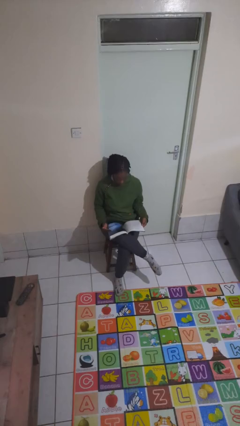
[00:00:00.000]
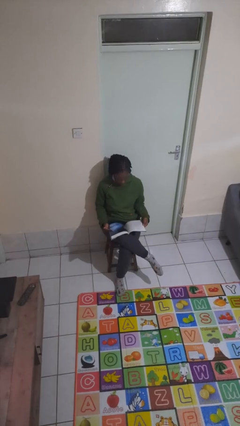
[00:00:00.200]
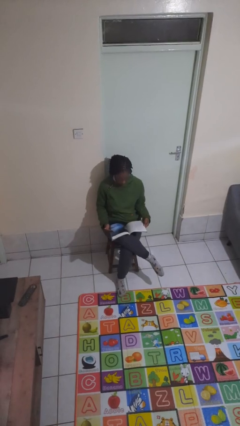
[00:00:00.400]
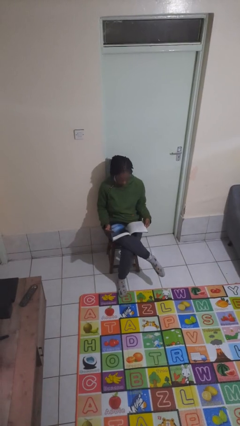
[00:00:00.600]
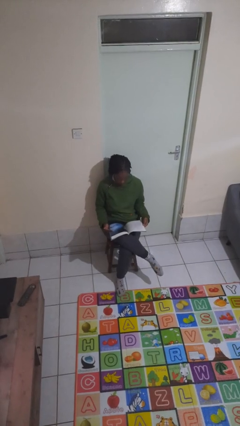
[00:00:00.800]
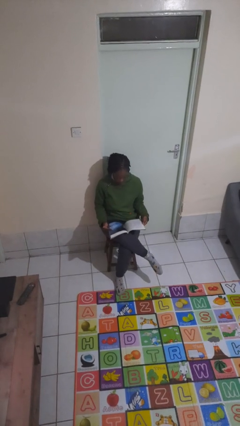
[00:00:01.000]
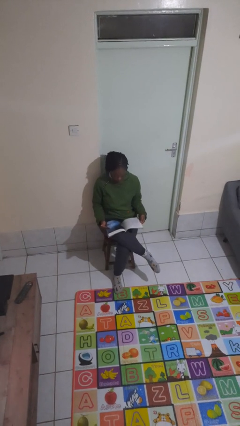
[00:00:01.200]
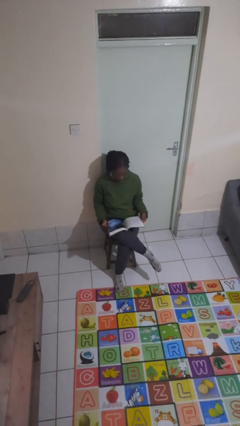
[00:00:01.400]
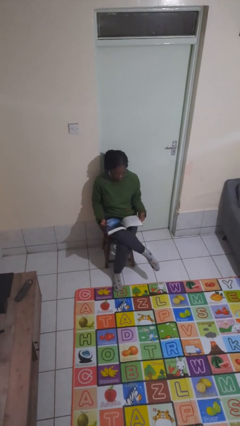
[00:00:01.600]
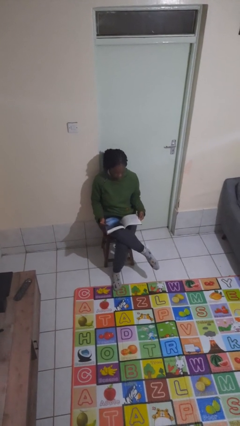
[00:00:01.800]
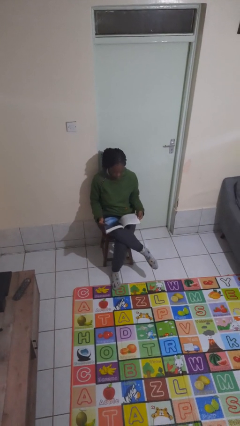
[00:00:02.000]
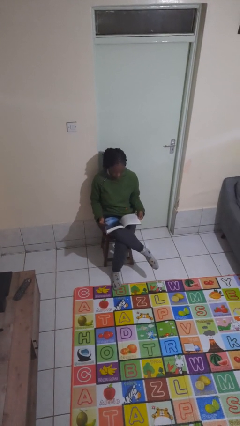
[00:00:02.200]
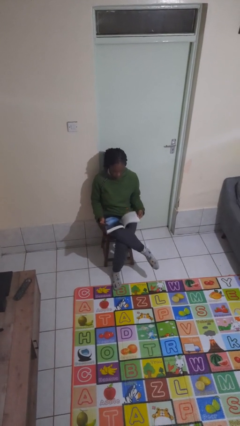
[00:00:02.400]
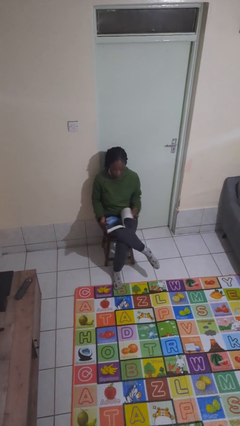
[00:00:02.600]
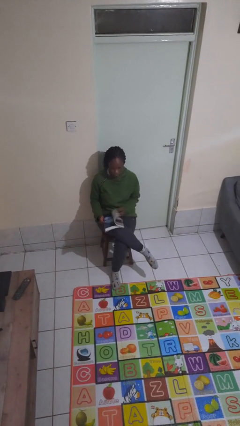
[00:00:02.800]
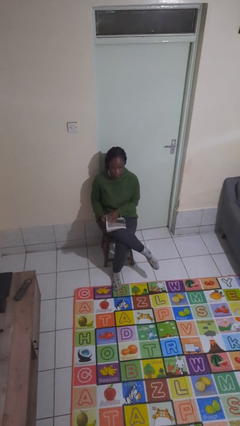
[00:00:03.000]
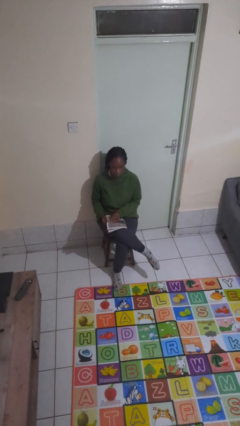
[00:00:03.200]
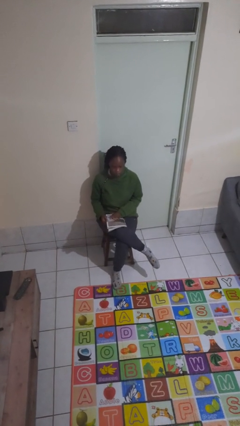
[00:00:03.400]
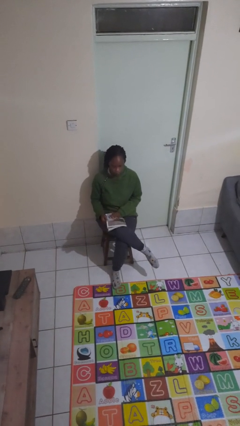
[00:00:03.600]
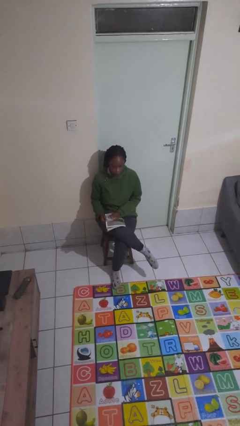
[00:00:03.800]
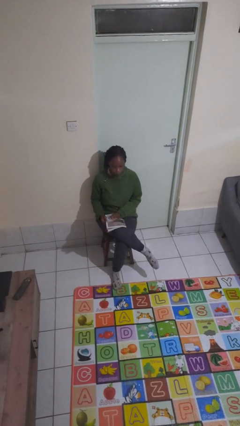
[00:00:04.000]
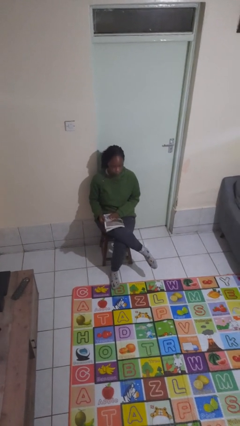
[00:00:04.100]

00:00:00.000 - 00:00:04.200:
person reads magazine

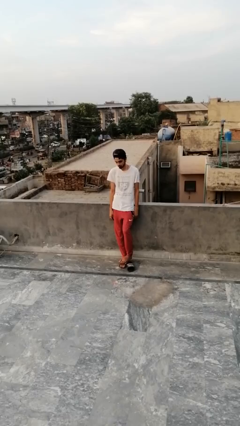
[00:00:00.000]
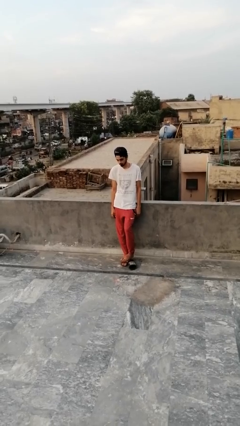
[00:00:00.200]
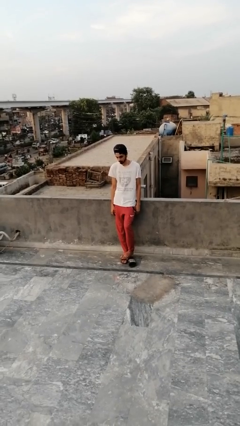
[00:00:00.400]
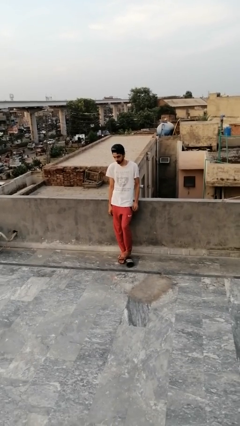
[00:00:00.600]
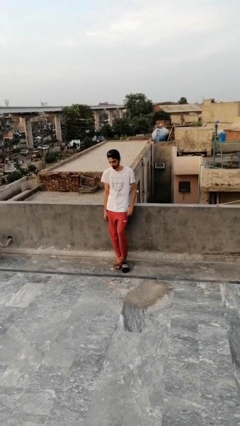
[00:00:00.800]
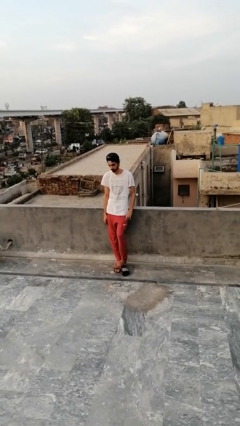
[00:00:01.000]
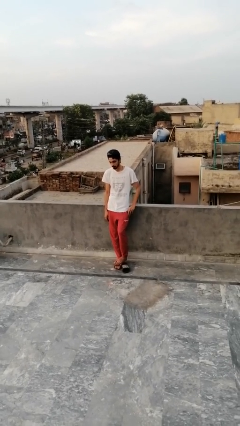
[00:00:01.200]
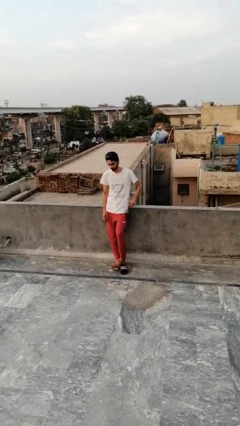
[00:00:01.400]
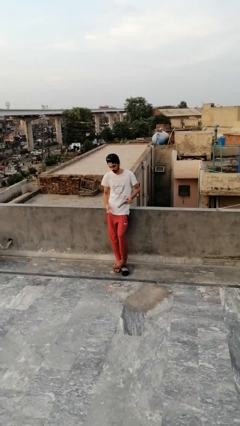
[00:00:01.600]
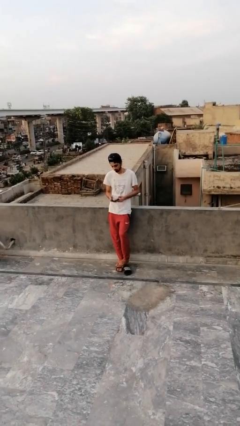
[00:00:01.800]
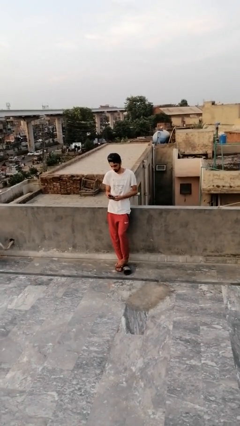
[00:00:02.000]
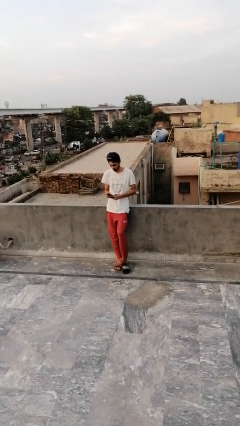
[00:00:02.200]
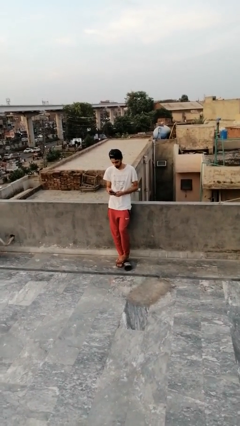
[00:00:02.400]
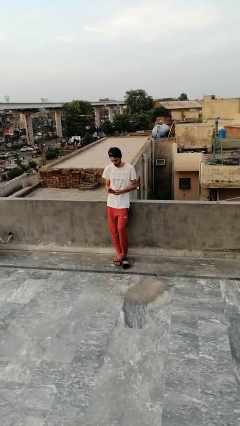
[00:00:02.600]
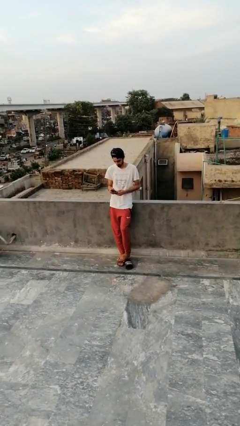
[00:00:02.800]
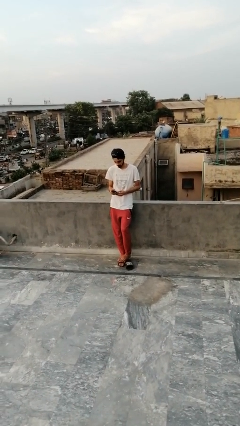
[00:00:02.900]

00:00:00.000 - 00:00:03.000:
person takes phone from pocket

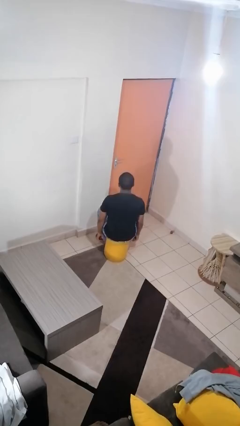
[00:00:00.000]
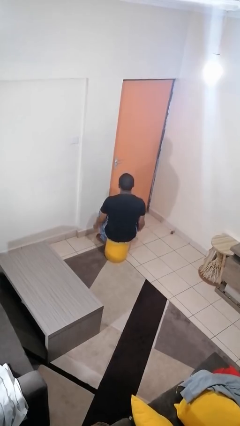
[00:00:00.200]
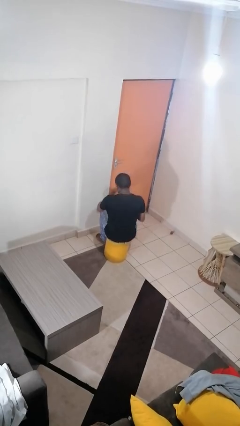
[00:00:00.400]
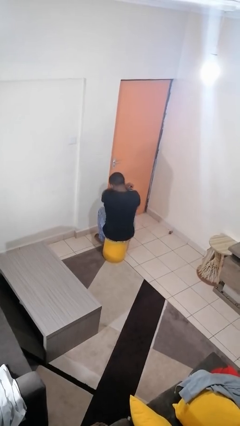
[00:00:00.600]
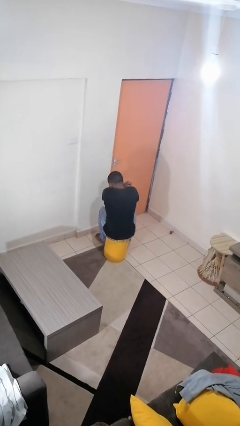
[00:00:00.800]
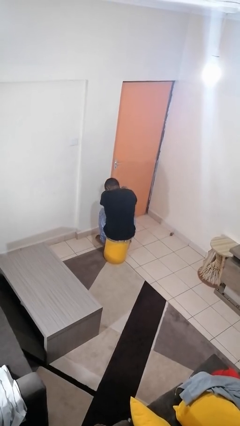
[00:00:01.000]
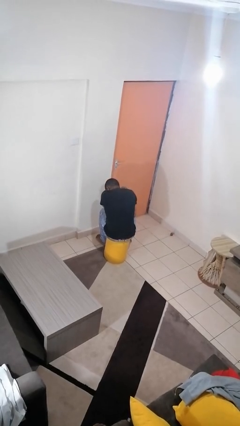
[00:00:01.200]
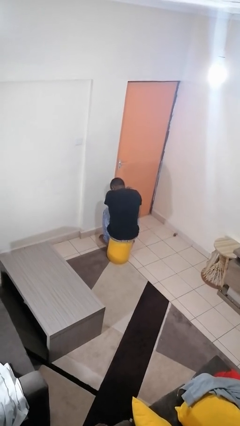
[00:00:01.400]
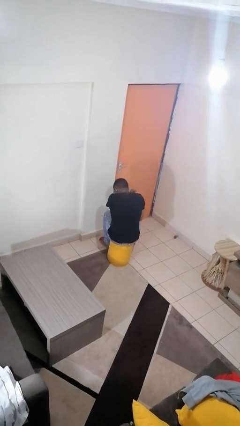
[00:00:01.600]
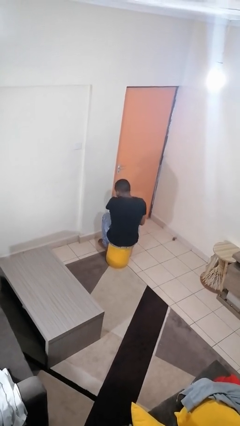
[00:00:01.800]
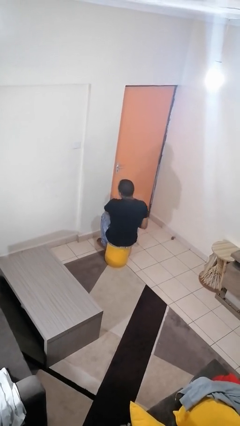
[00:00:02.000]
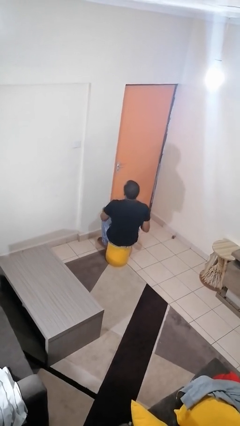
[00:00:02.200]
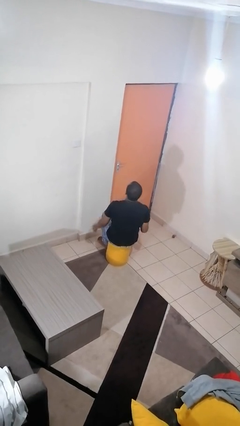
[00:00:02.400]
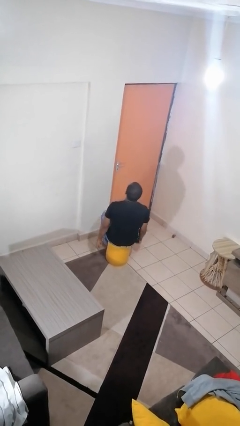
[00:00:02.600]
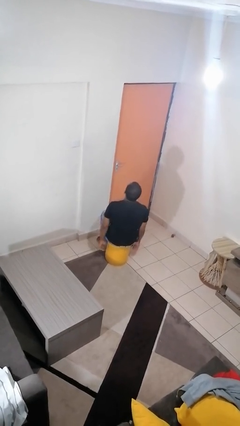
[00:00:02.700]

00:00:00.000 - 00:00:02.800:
person sneezes into arm

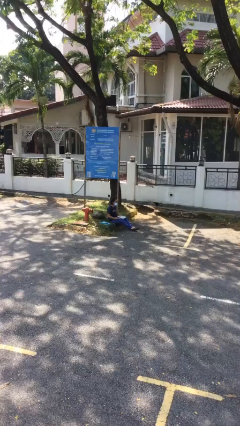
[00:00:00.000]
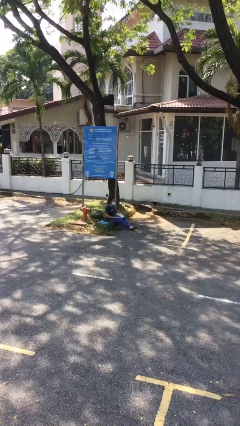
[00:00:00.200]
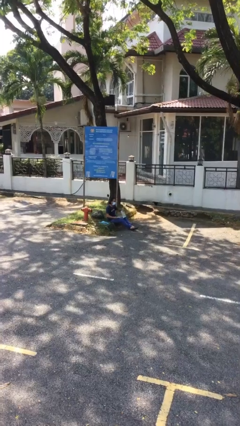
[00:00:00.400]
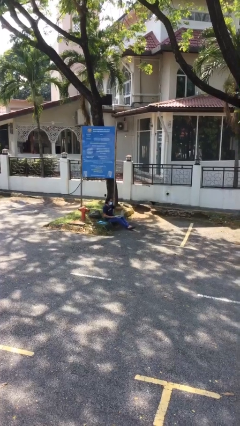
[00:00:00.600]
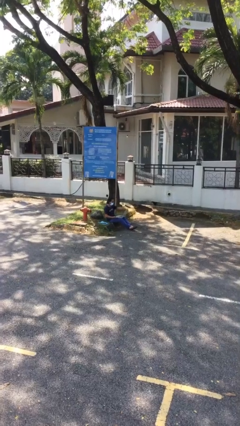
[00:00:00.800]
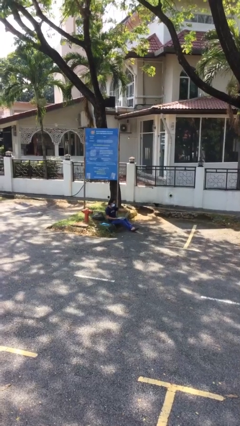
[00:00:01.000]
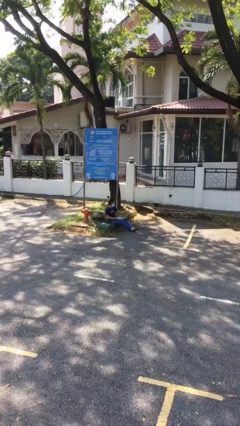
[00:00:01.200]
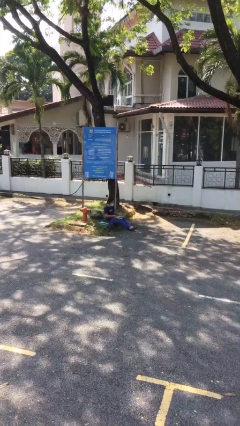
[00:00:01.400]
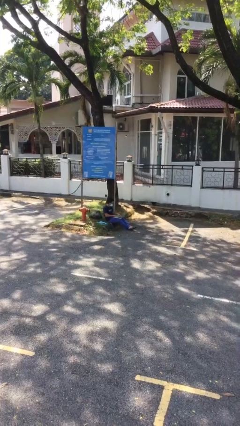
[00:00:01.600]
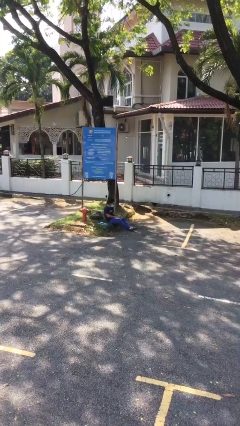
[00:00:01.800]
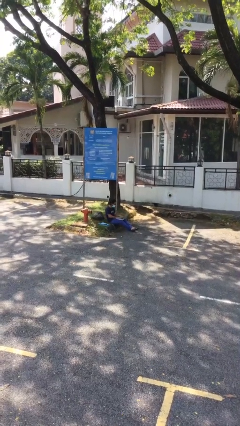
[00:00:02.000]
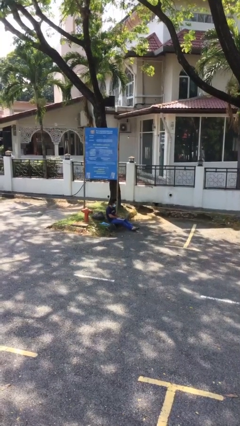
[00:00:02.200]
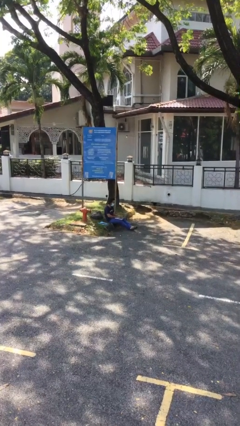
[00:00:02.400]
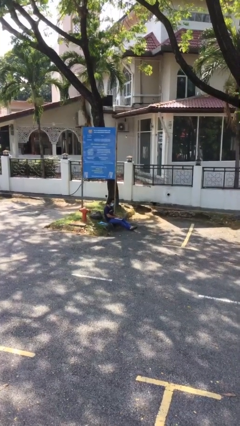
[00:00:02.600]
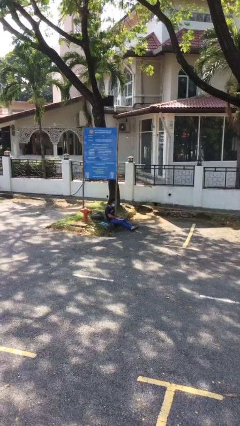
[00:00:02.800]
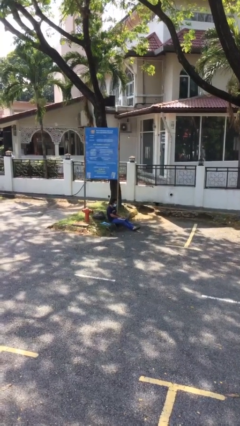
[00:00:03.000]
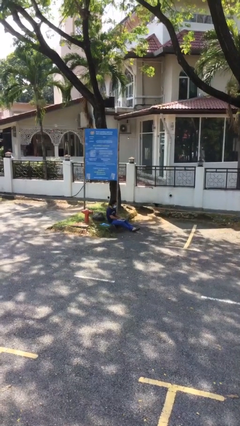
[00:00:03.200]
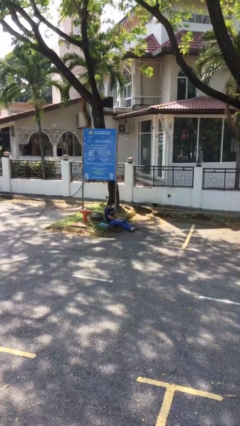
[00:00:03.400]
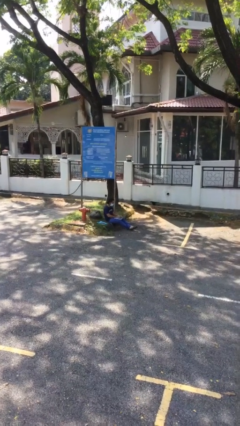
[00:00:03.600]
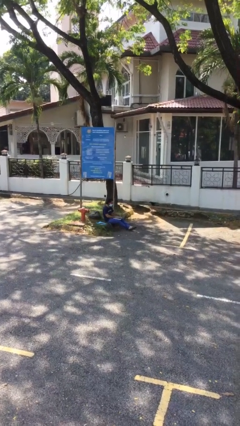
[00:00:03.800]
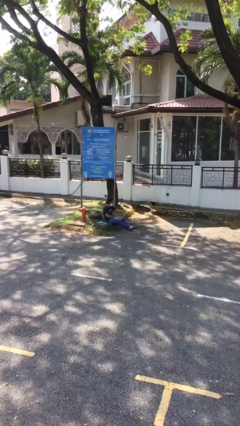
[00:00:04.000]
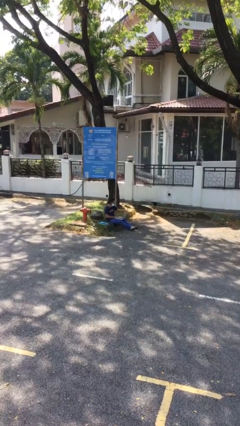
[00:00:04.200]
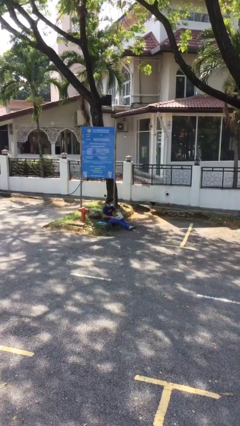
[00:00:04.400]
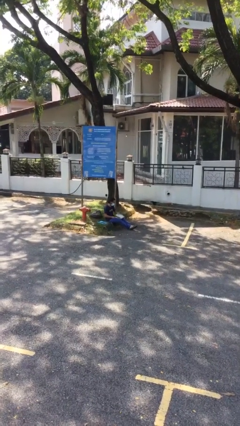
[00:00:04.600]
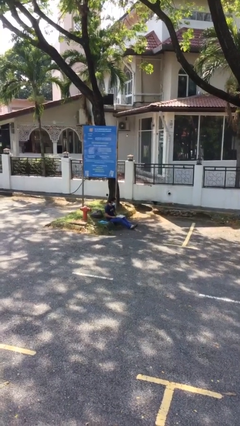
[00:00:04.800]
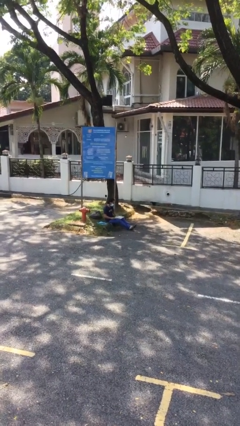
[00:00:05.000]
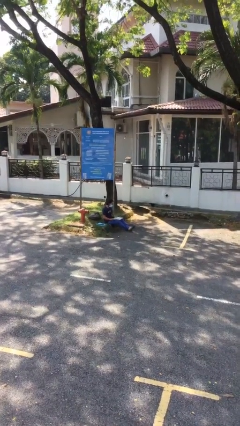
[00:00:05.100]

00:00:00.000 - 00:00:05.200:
person interacts with laptop

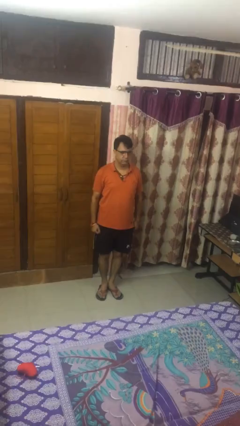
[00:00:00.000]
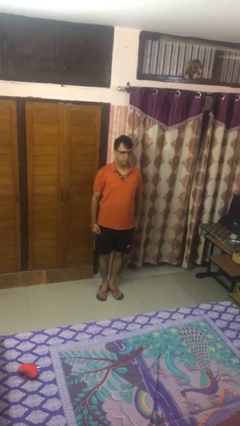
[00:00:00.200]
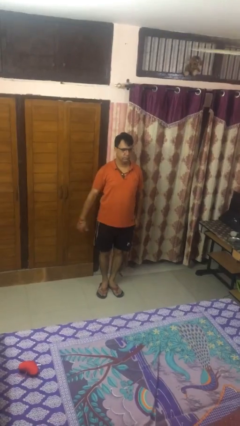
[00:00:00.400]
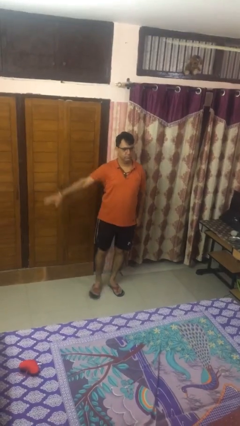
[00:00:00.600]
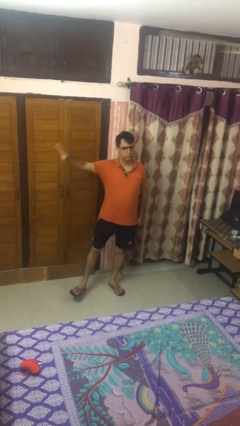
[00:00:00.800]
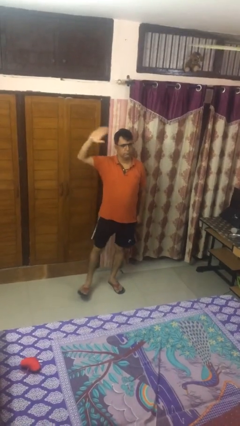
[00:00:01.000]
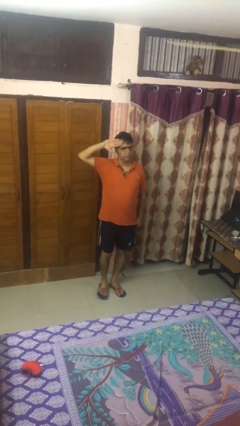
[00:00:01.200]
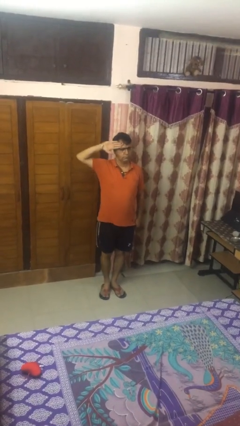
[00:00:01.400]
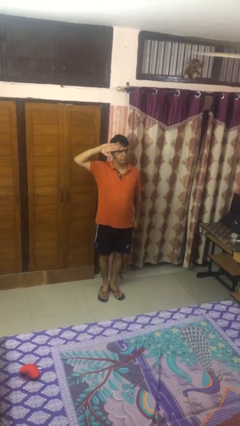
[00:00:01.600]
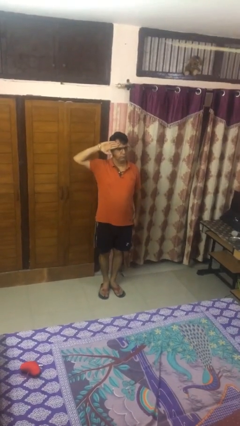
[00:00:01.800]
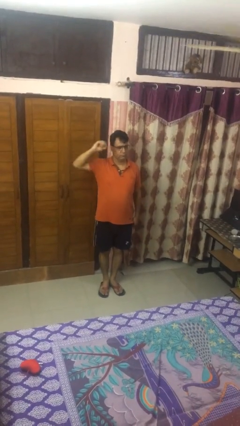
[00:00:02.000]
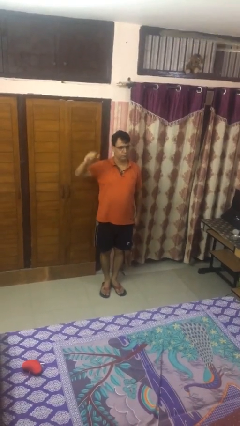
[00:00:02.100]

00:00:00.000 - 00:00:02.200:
person salutes
